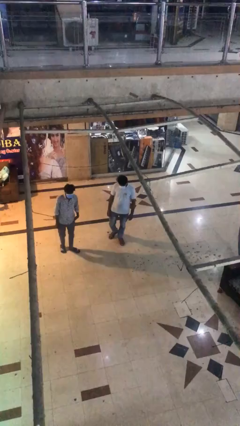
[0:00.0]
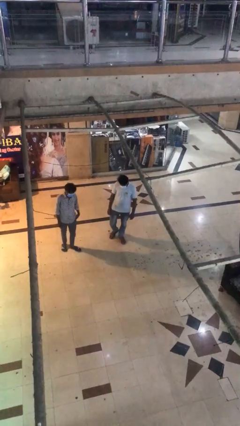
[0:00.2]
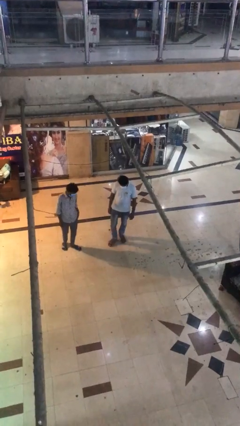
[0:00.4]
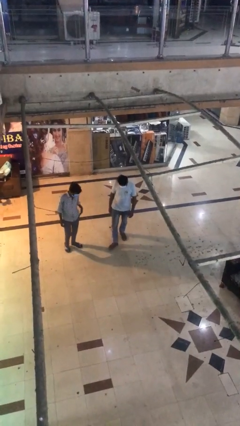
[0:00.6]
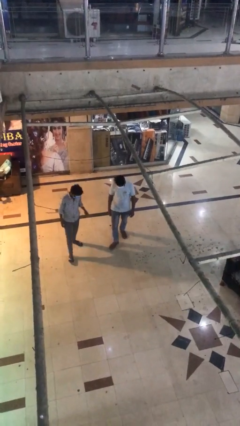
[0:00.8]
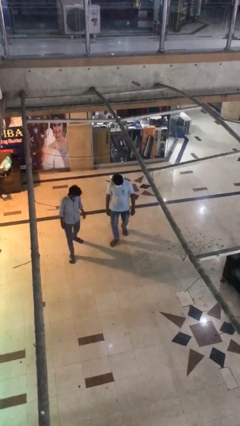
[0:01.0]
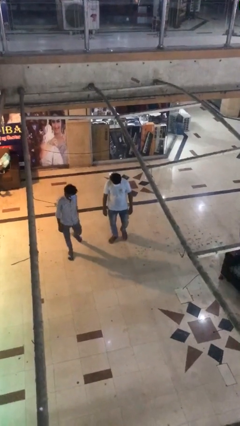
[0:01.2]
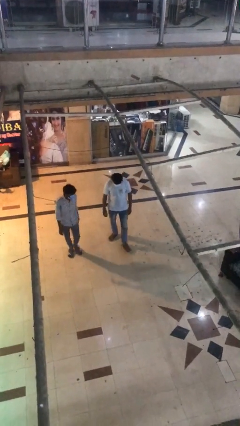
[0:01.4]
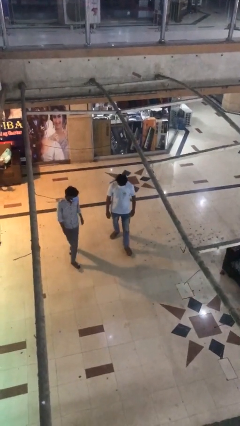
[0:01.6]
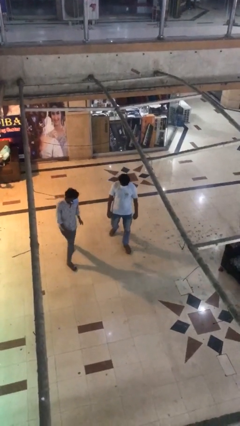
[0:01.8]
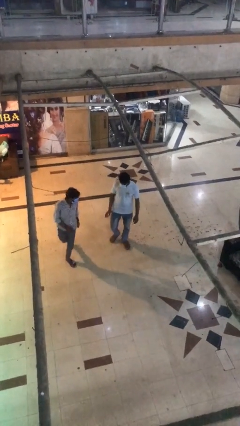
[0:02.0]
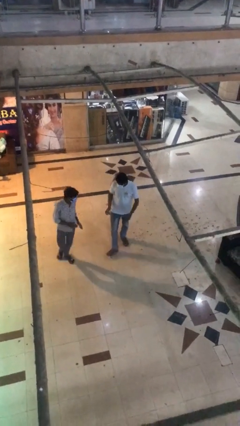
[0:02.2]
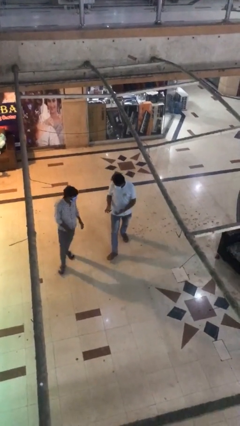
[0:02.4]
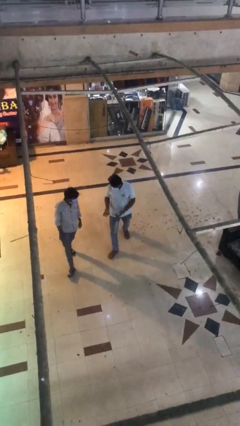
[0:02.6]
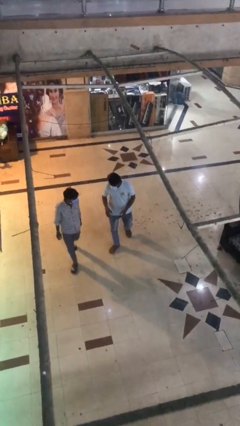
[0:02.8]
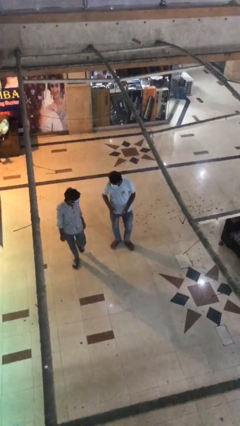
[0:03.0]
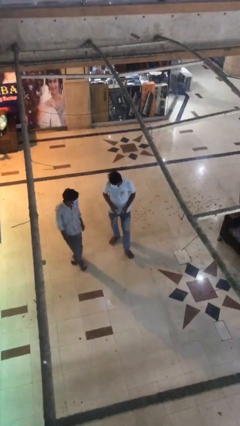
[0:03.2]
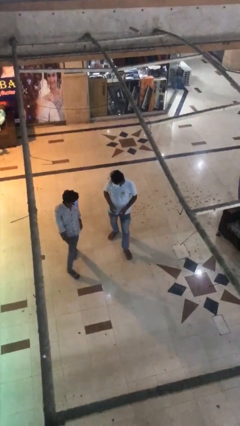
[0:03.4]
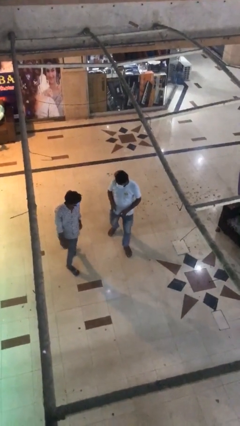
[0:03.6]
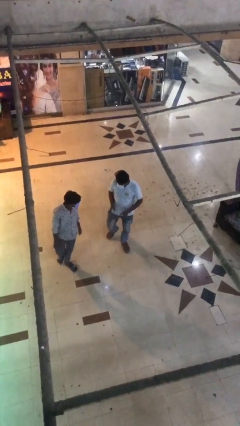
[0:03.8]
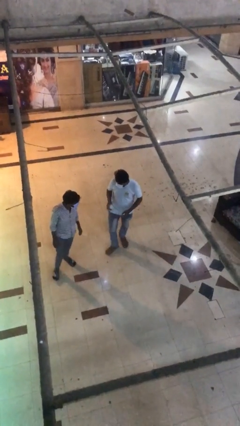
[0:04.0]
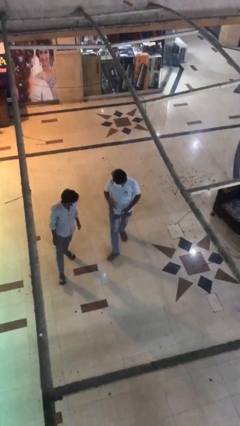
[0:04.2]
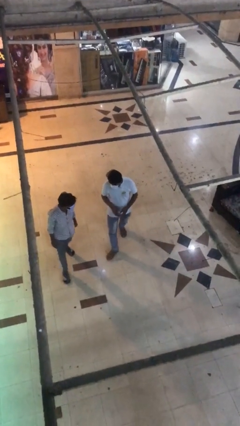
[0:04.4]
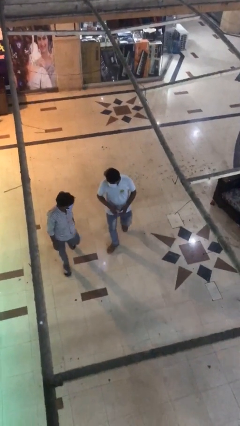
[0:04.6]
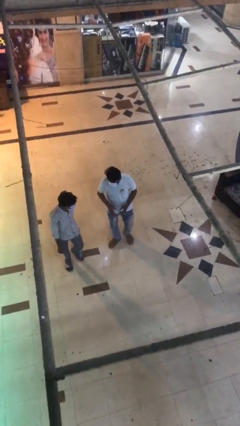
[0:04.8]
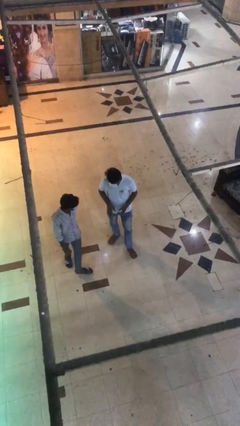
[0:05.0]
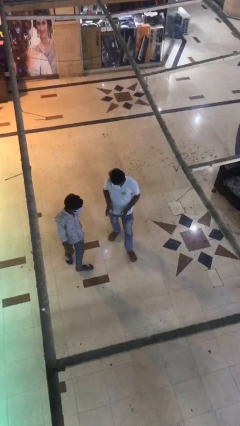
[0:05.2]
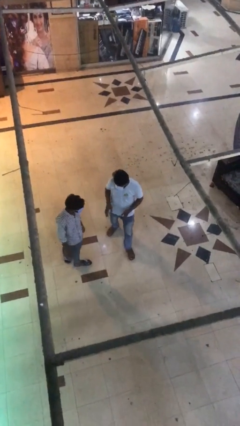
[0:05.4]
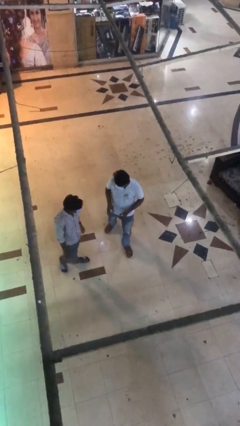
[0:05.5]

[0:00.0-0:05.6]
person talks to person

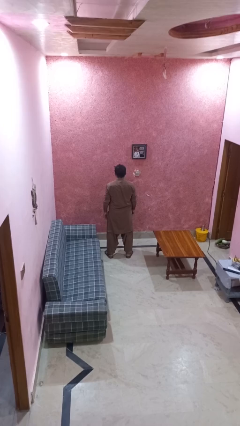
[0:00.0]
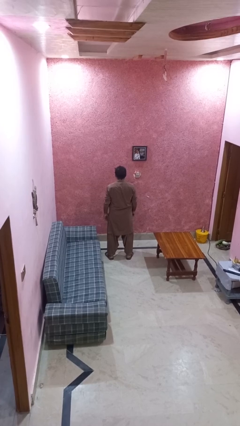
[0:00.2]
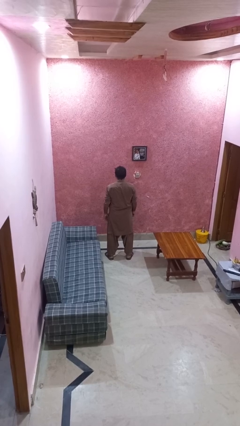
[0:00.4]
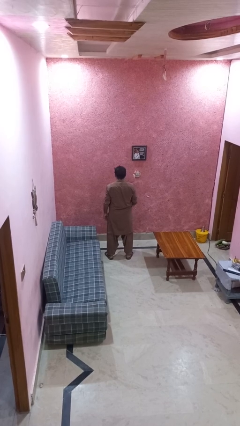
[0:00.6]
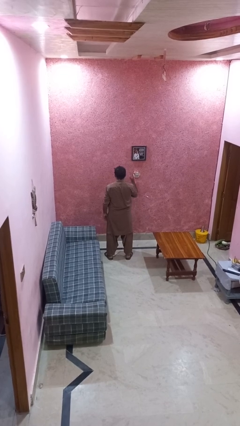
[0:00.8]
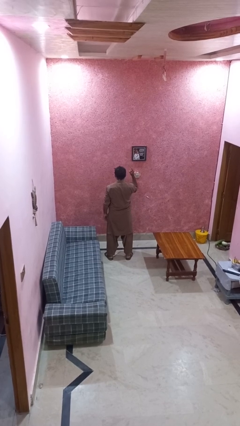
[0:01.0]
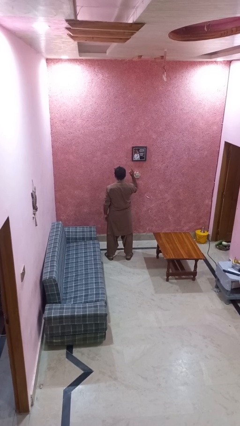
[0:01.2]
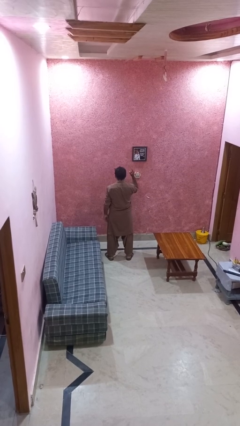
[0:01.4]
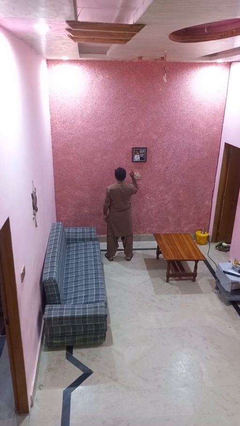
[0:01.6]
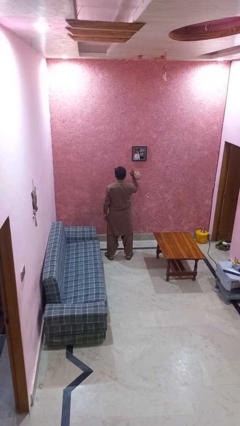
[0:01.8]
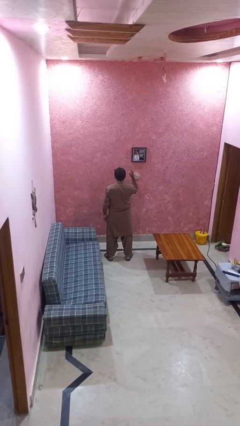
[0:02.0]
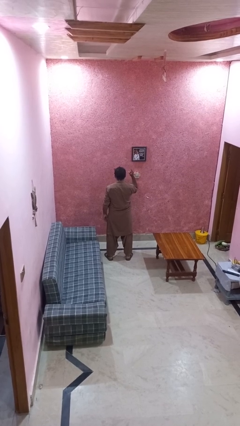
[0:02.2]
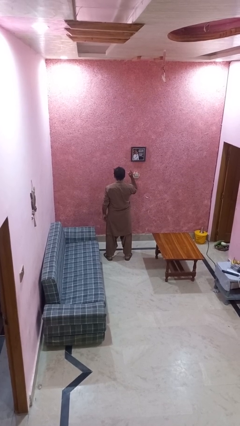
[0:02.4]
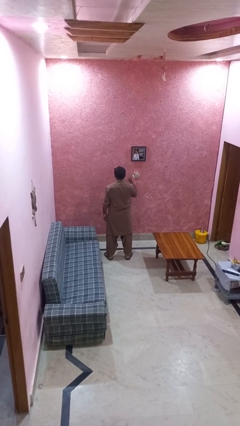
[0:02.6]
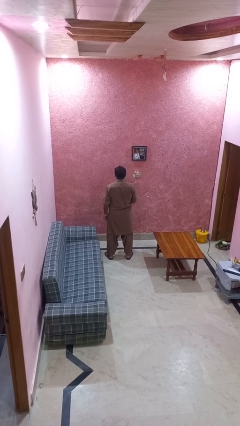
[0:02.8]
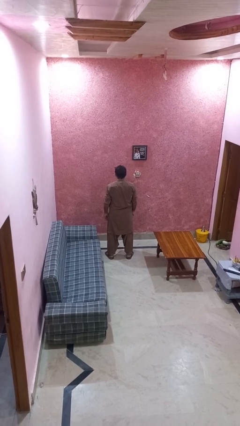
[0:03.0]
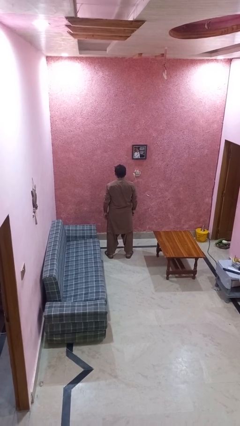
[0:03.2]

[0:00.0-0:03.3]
person gestures number one

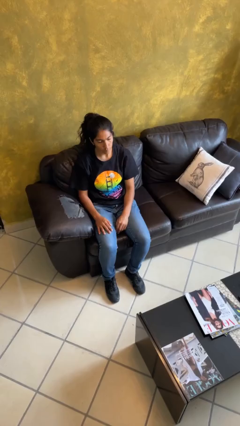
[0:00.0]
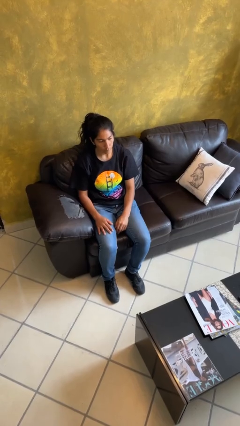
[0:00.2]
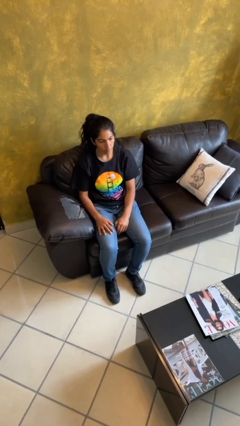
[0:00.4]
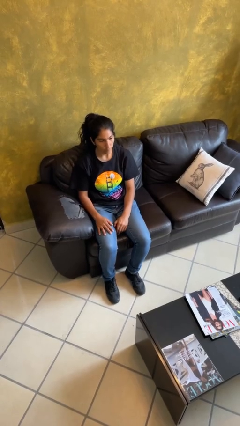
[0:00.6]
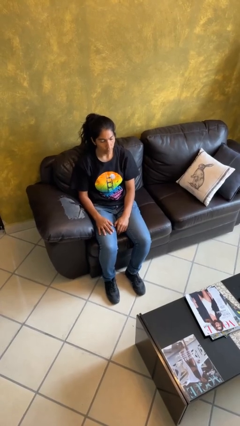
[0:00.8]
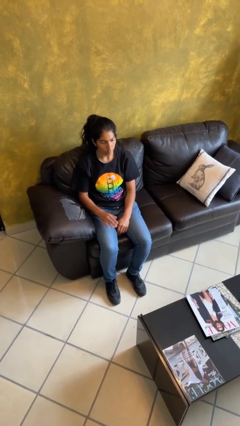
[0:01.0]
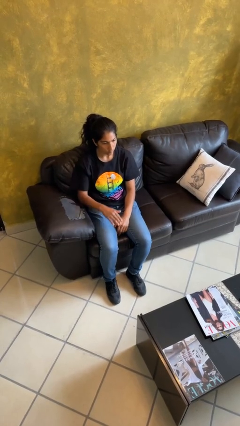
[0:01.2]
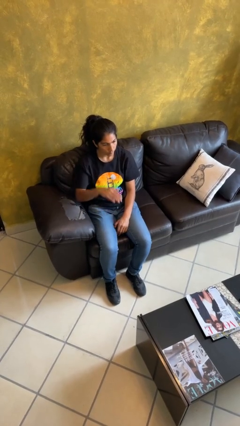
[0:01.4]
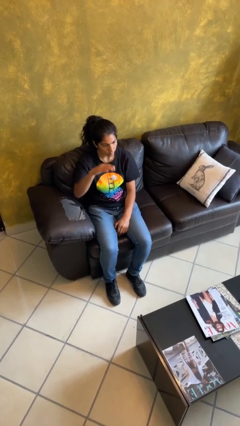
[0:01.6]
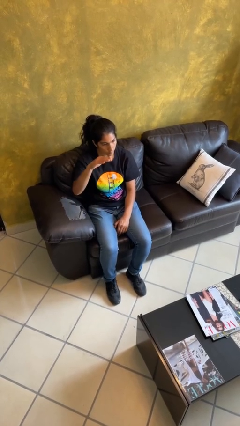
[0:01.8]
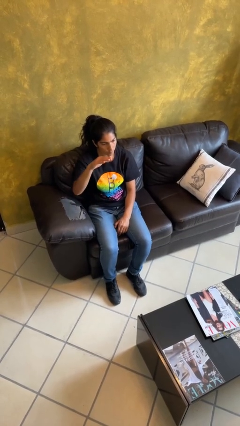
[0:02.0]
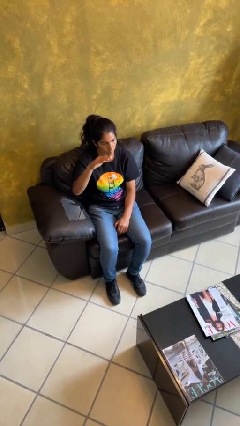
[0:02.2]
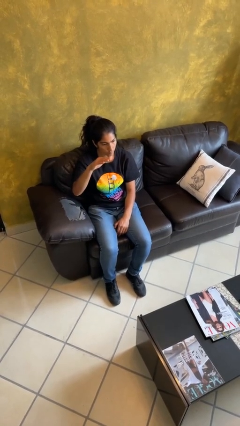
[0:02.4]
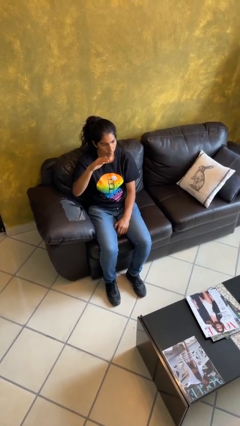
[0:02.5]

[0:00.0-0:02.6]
person gestures swipe up

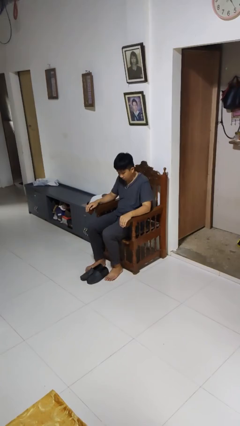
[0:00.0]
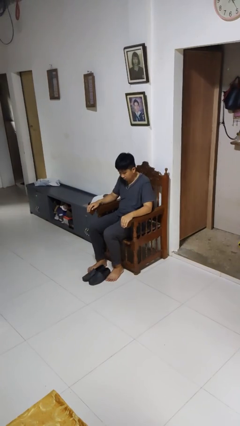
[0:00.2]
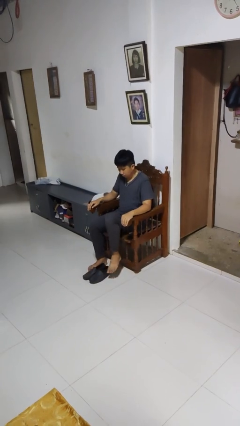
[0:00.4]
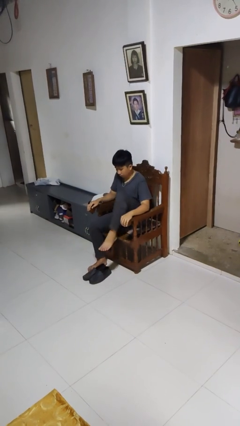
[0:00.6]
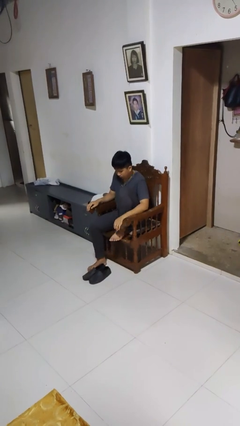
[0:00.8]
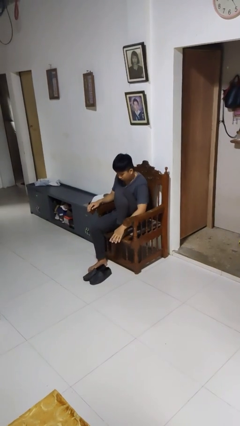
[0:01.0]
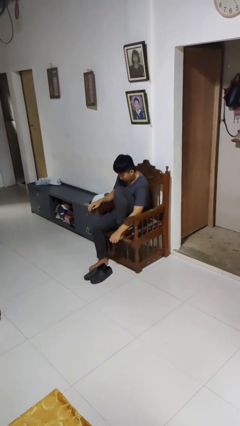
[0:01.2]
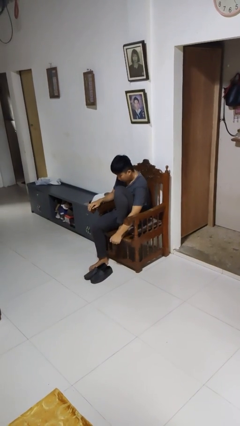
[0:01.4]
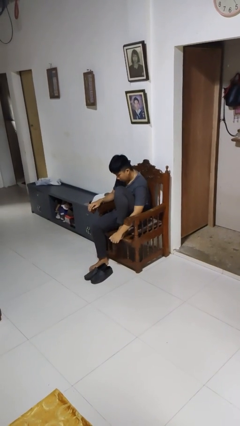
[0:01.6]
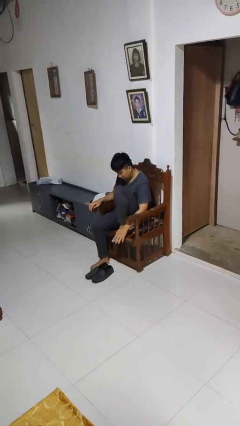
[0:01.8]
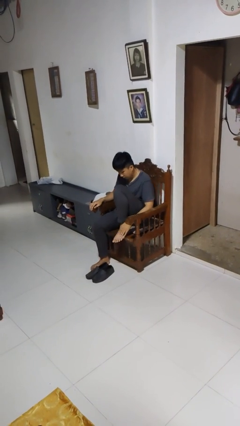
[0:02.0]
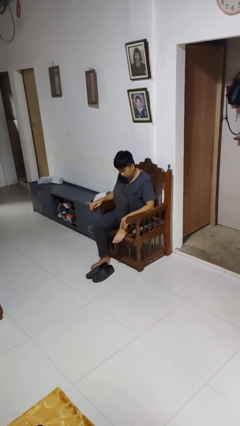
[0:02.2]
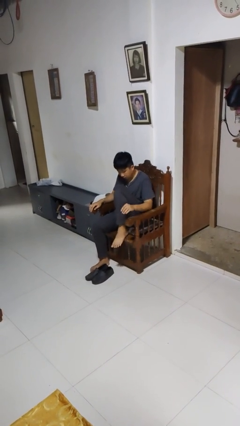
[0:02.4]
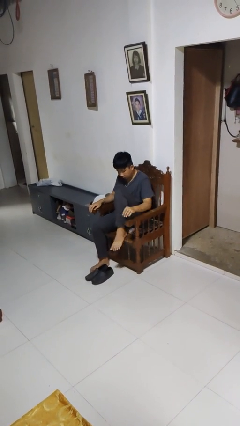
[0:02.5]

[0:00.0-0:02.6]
person rubs foot

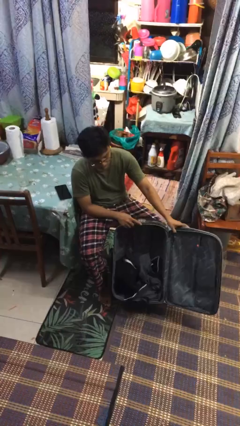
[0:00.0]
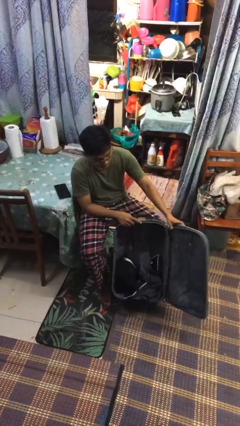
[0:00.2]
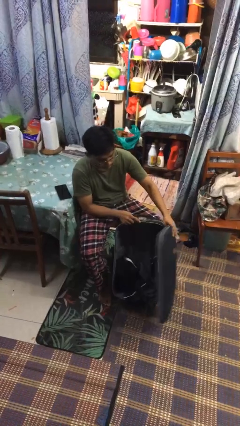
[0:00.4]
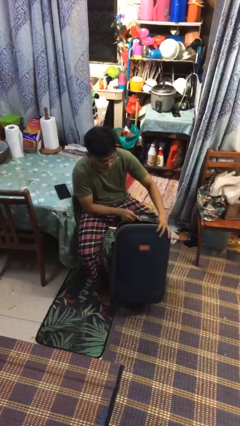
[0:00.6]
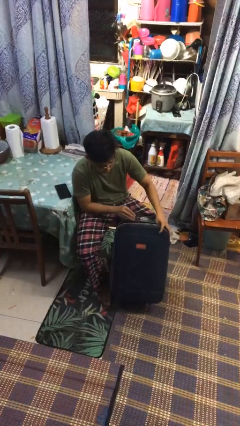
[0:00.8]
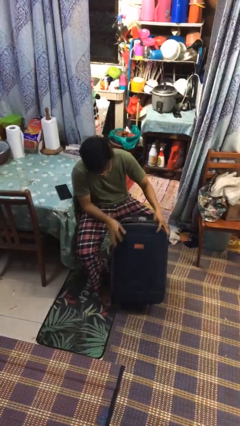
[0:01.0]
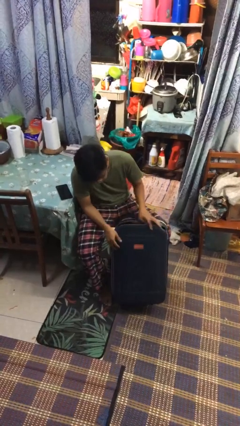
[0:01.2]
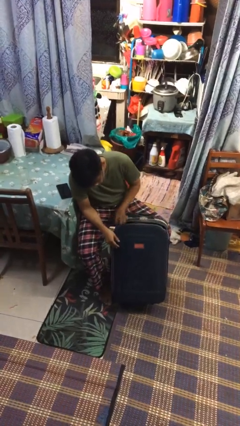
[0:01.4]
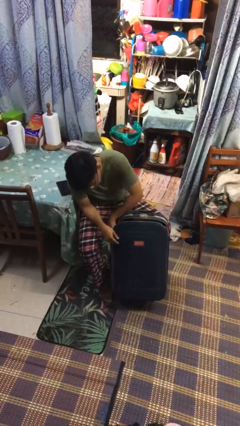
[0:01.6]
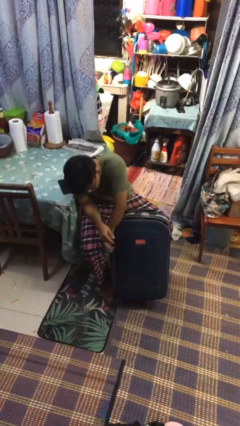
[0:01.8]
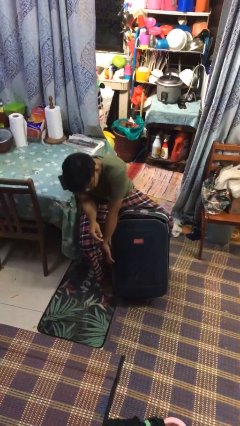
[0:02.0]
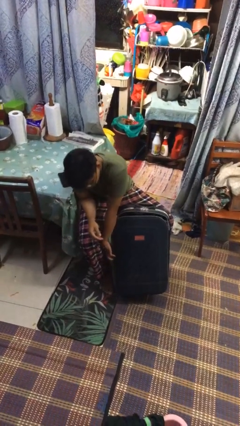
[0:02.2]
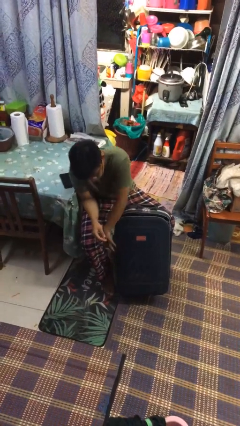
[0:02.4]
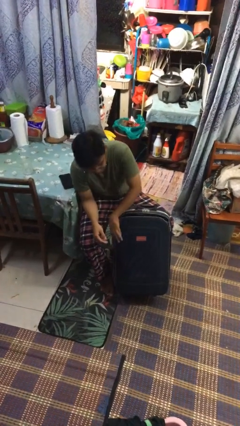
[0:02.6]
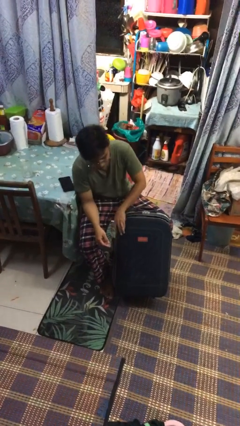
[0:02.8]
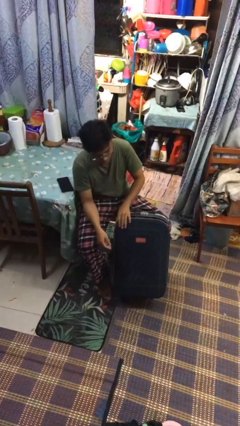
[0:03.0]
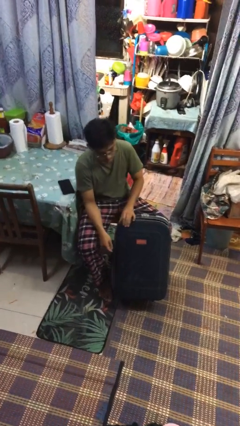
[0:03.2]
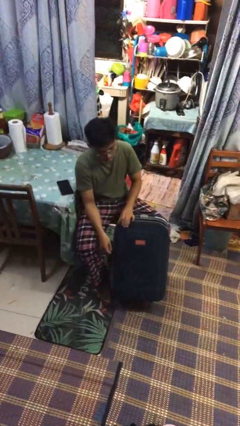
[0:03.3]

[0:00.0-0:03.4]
person closes suitcase

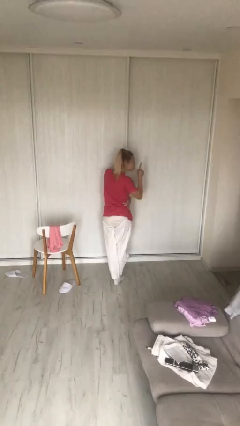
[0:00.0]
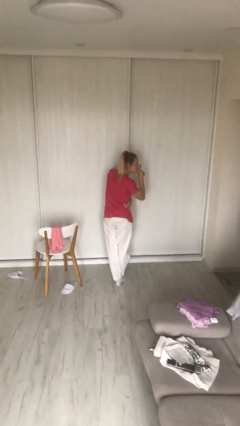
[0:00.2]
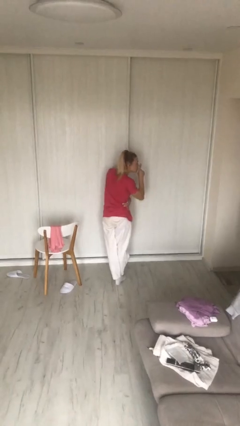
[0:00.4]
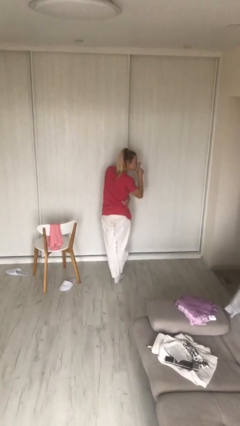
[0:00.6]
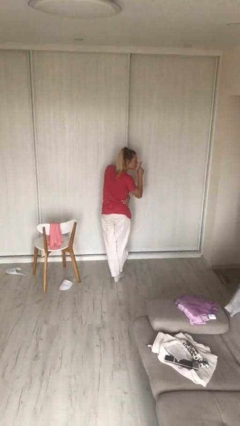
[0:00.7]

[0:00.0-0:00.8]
person gestures be quiet
